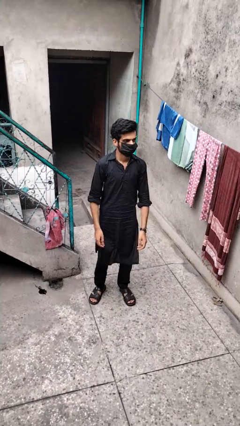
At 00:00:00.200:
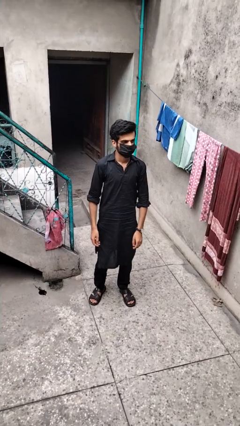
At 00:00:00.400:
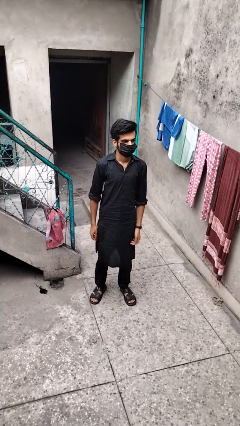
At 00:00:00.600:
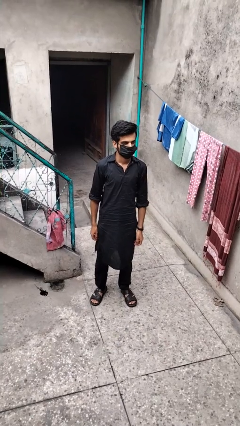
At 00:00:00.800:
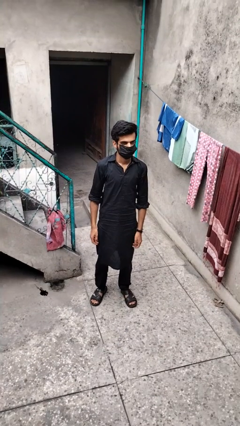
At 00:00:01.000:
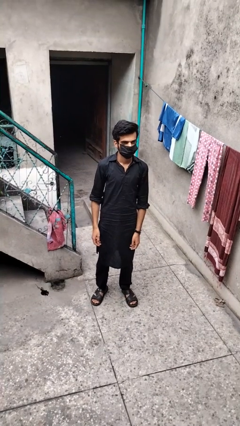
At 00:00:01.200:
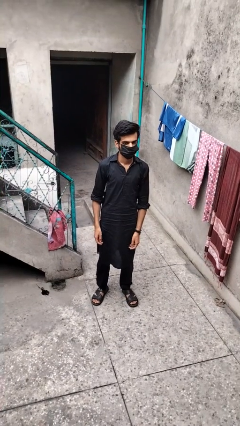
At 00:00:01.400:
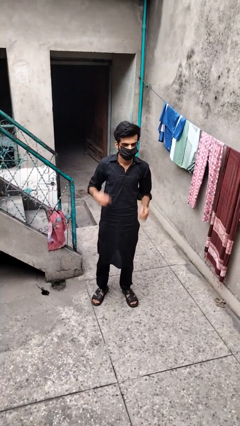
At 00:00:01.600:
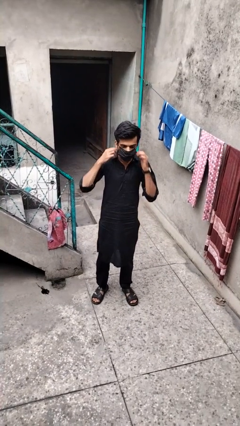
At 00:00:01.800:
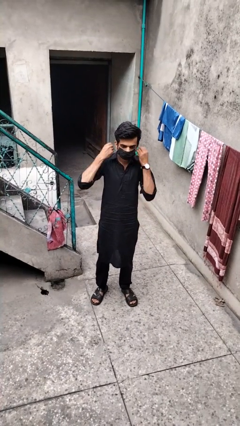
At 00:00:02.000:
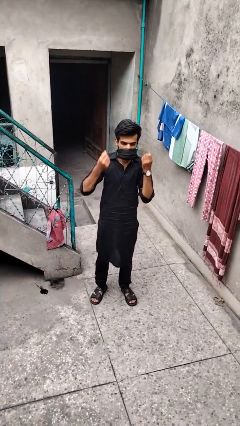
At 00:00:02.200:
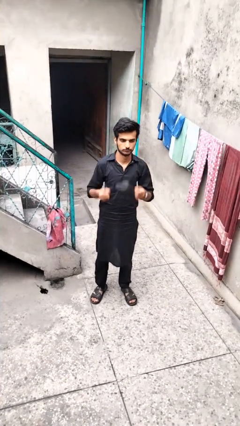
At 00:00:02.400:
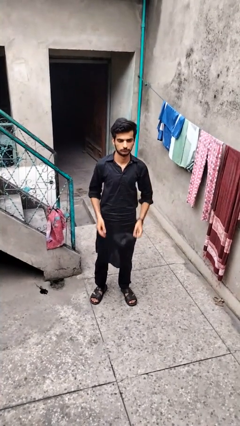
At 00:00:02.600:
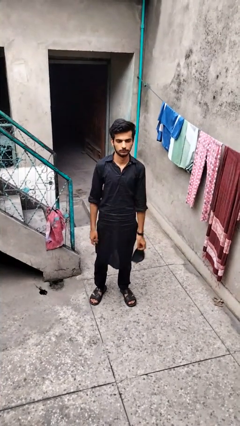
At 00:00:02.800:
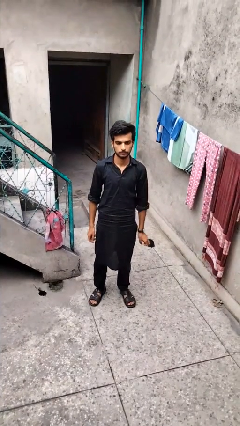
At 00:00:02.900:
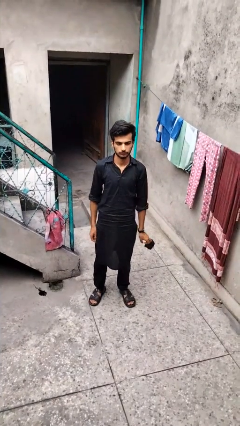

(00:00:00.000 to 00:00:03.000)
person takes off facemask

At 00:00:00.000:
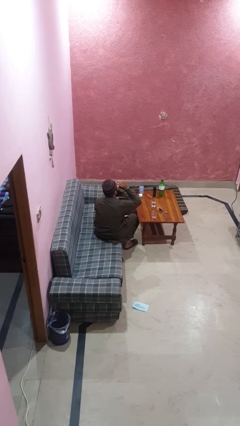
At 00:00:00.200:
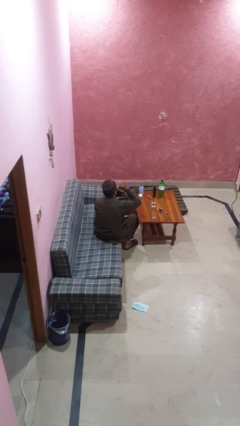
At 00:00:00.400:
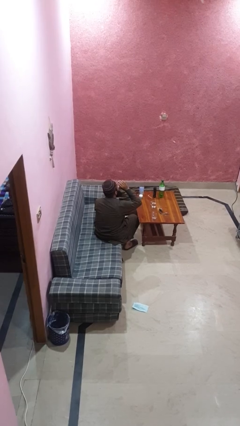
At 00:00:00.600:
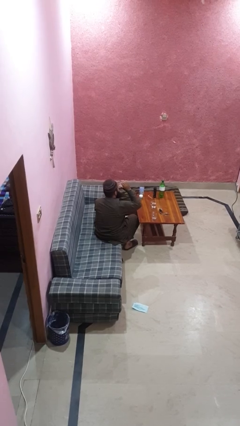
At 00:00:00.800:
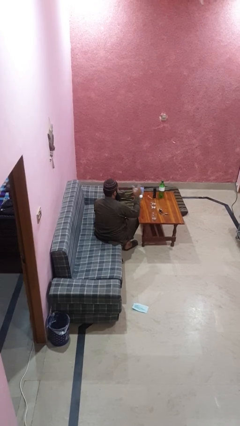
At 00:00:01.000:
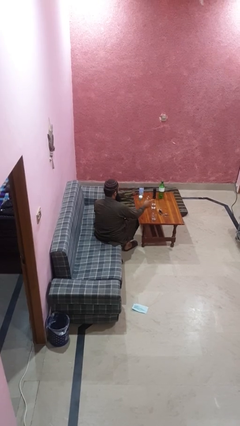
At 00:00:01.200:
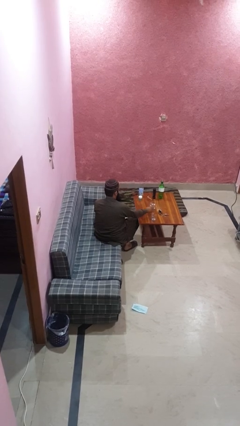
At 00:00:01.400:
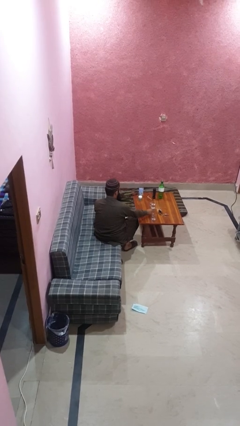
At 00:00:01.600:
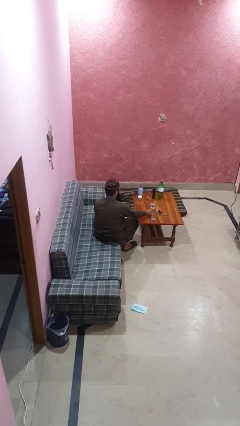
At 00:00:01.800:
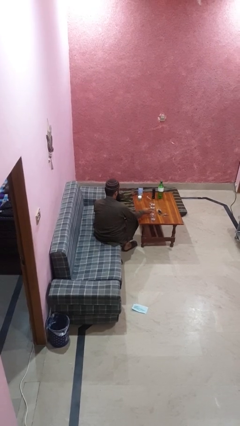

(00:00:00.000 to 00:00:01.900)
person puts down object on table

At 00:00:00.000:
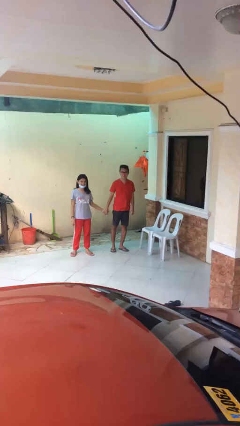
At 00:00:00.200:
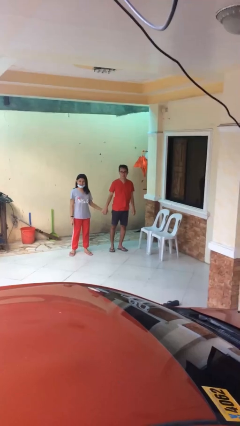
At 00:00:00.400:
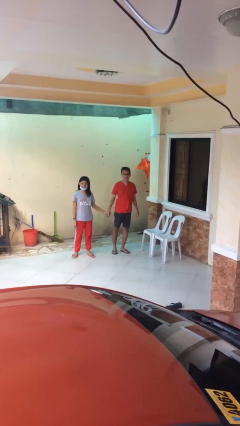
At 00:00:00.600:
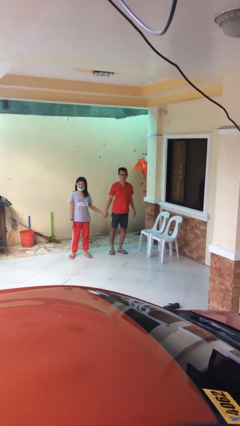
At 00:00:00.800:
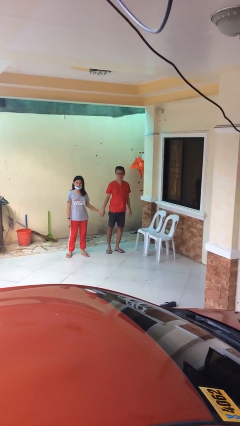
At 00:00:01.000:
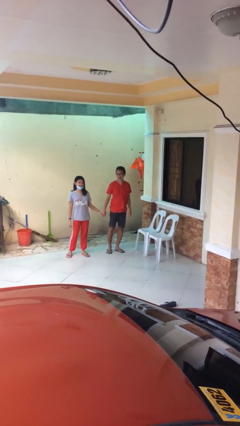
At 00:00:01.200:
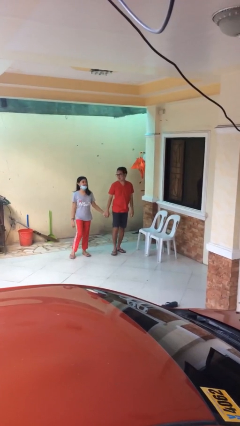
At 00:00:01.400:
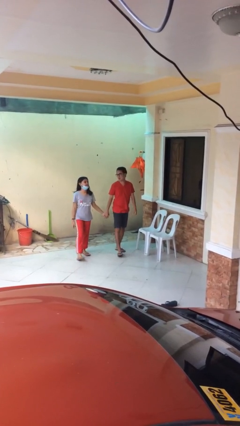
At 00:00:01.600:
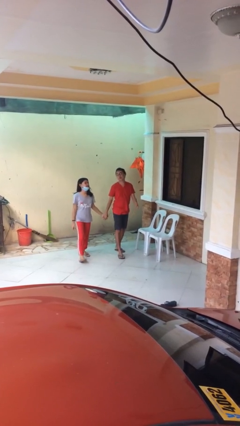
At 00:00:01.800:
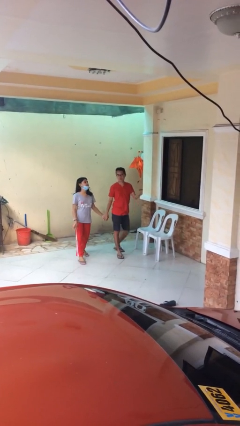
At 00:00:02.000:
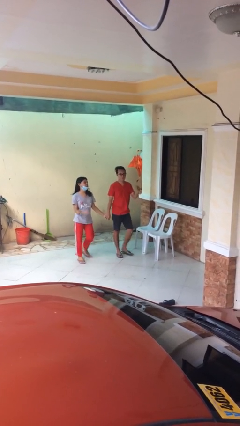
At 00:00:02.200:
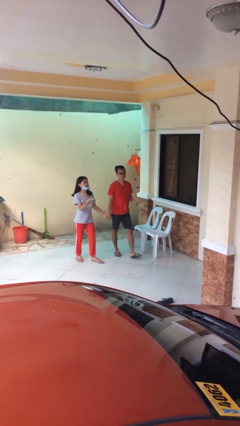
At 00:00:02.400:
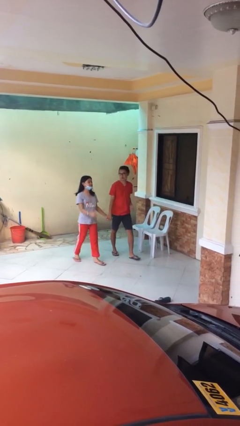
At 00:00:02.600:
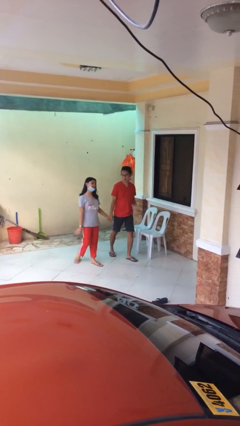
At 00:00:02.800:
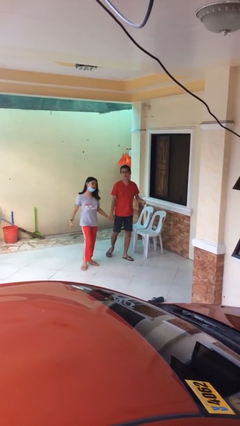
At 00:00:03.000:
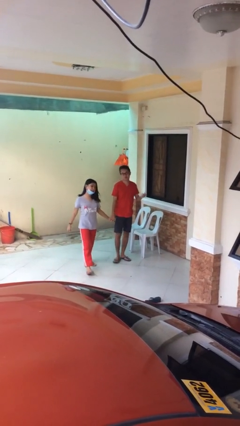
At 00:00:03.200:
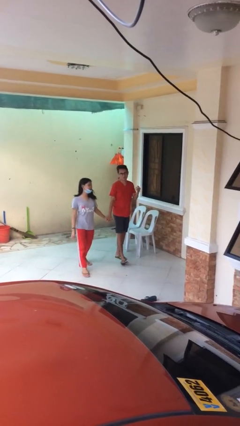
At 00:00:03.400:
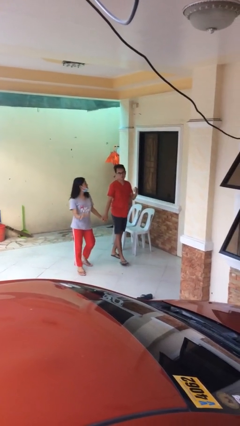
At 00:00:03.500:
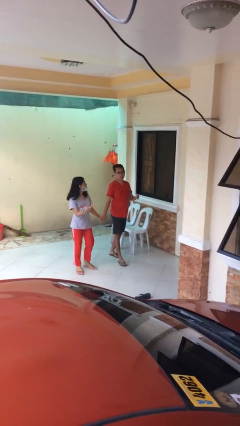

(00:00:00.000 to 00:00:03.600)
person holds hand

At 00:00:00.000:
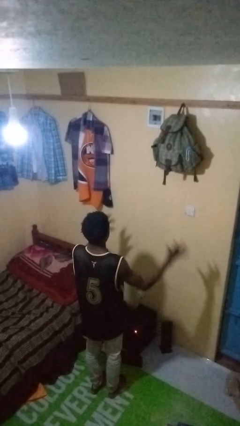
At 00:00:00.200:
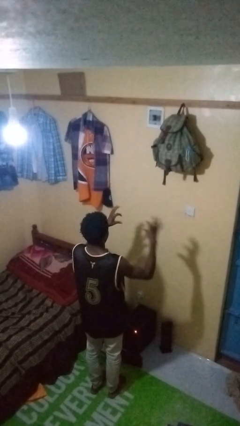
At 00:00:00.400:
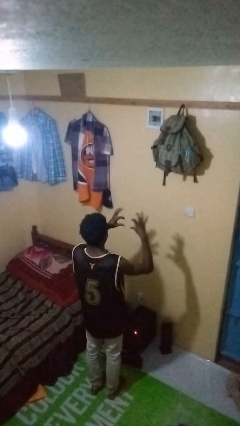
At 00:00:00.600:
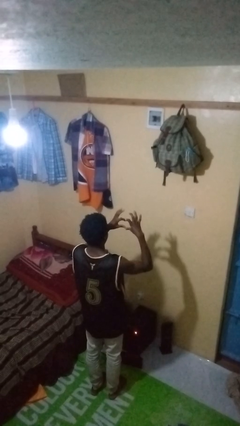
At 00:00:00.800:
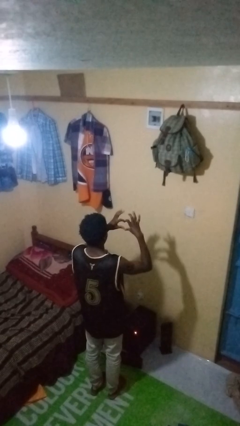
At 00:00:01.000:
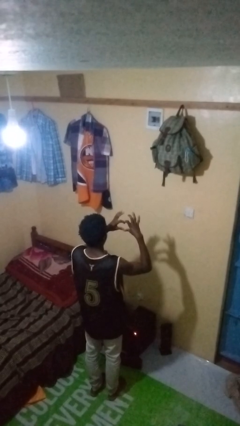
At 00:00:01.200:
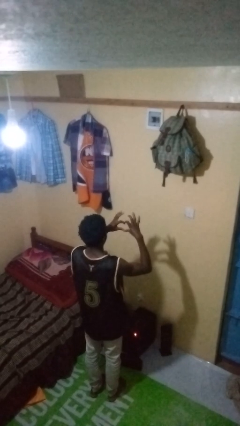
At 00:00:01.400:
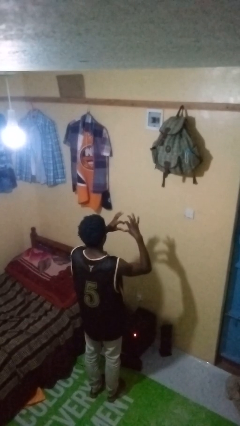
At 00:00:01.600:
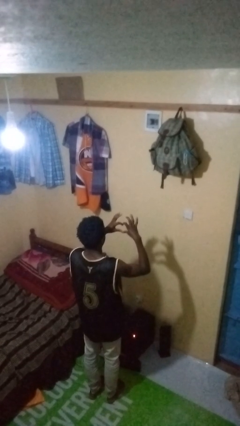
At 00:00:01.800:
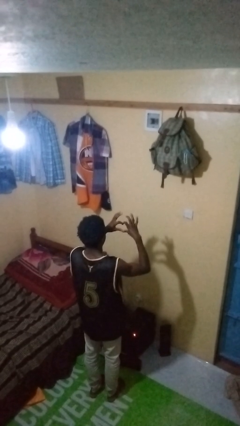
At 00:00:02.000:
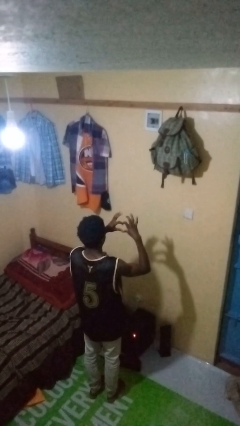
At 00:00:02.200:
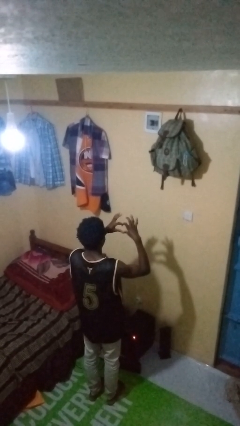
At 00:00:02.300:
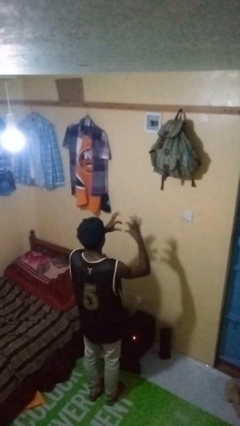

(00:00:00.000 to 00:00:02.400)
person gestures heart

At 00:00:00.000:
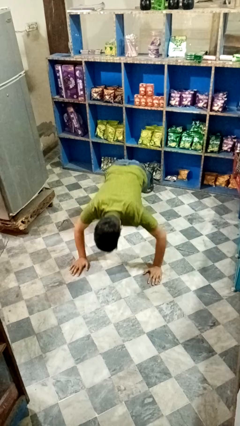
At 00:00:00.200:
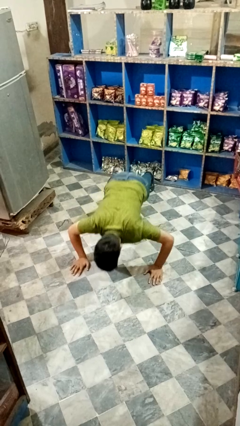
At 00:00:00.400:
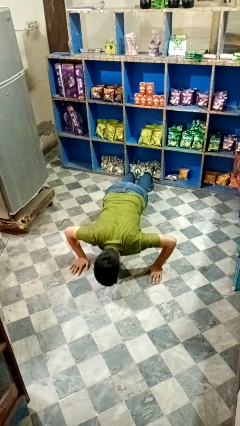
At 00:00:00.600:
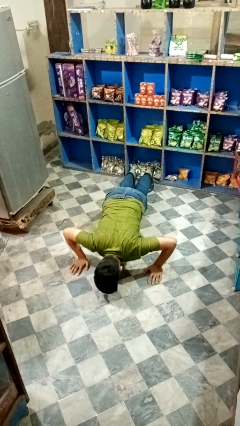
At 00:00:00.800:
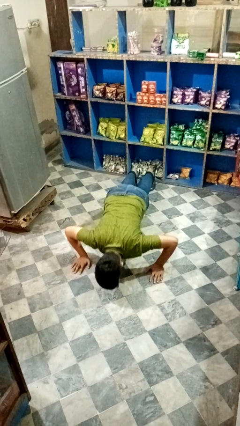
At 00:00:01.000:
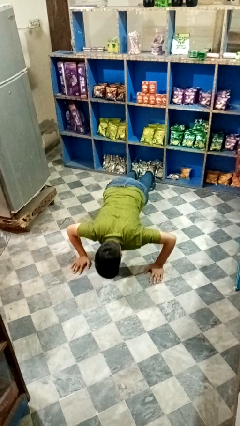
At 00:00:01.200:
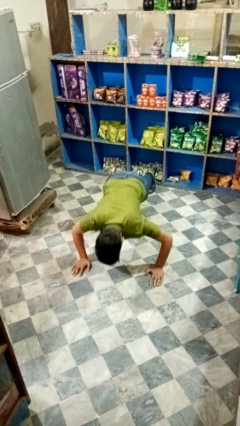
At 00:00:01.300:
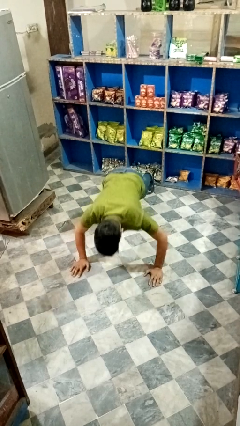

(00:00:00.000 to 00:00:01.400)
person exercises with pushup

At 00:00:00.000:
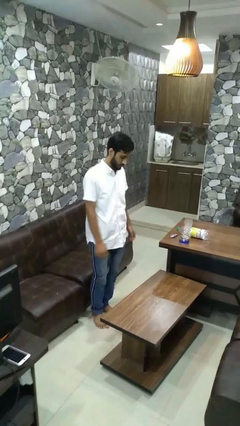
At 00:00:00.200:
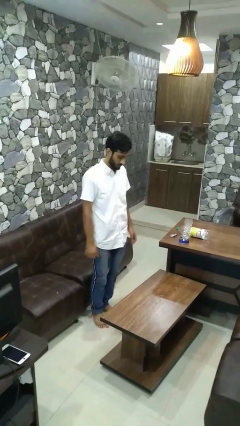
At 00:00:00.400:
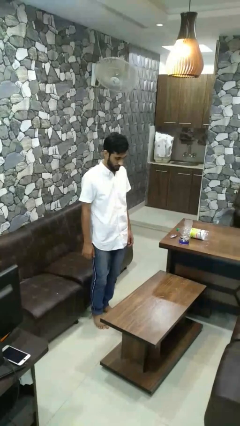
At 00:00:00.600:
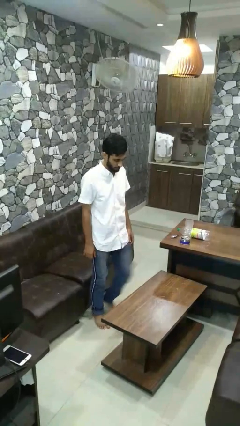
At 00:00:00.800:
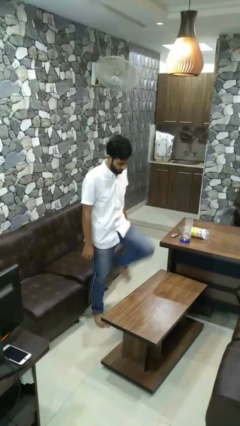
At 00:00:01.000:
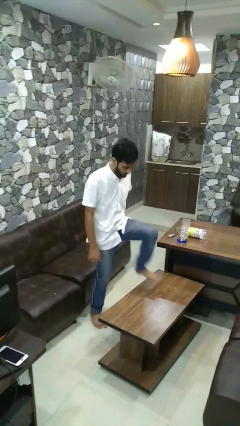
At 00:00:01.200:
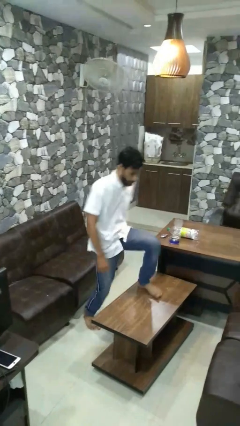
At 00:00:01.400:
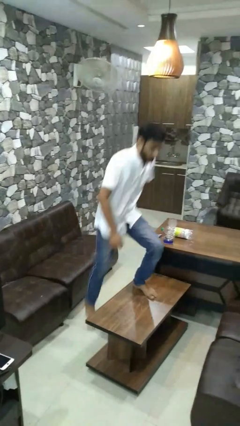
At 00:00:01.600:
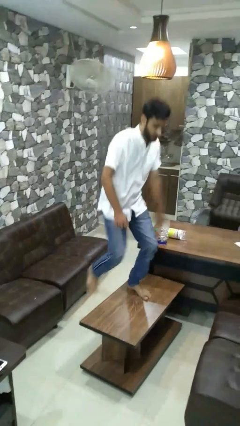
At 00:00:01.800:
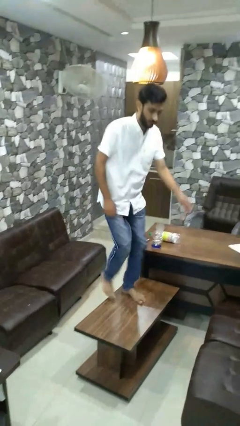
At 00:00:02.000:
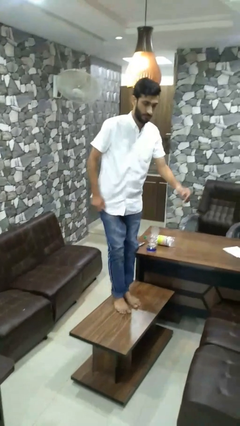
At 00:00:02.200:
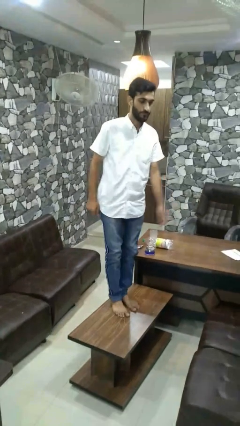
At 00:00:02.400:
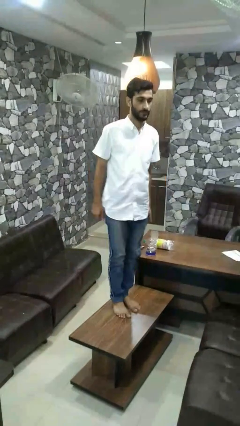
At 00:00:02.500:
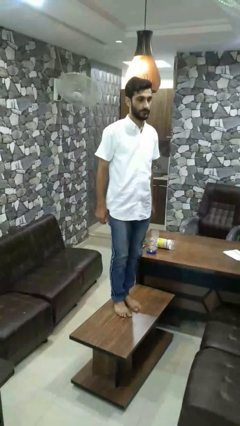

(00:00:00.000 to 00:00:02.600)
person climbs on table

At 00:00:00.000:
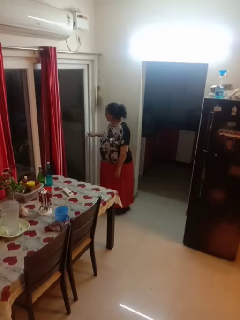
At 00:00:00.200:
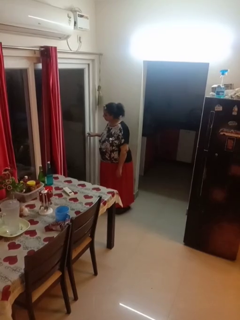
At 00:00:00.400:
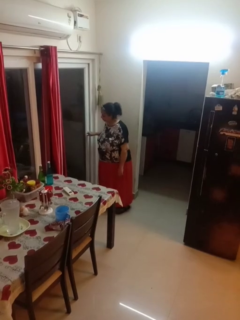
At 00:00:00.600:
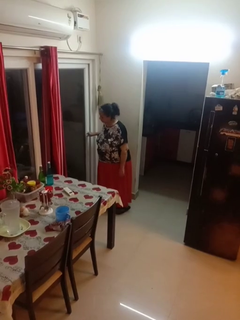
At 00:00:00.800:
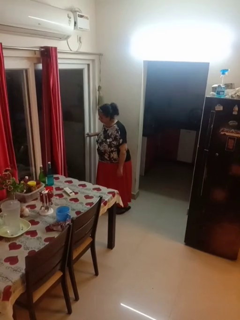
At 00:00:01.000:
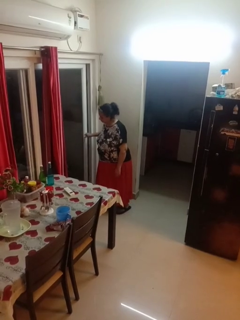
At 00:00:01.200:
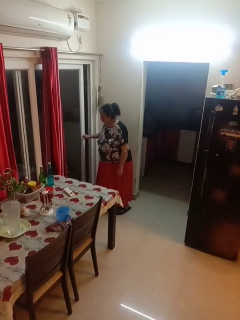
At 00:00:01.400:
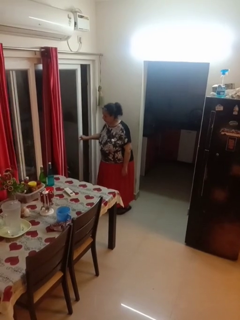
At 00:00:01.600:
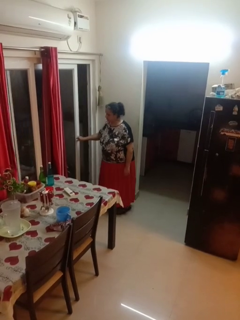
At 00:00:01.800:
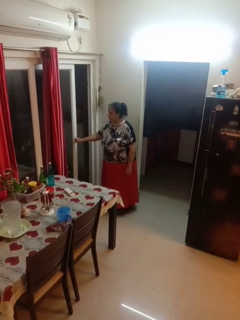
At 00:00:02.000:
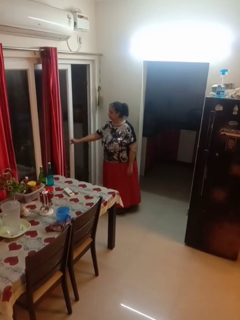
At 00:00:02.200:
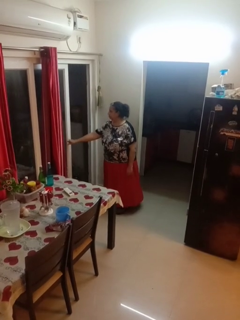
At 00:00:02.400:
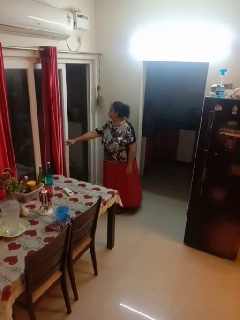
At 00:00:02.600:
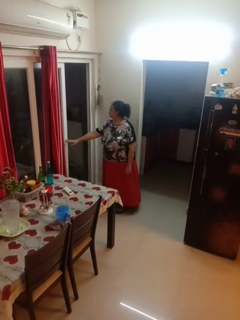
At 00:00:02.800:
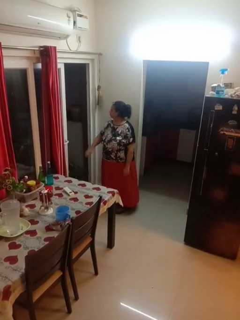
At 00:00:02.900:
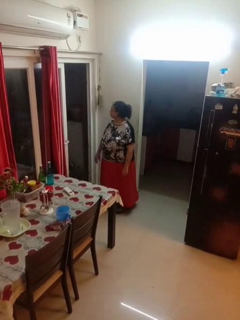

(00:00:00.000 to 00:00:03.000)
person opens sliding door
